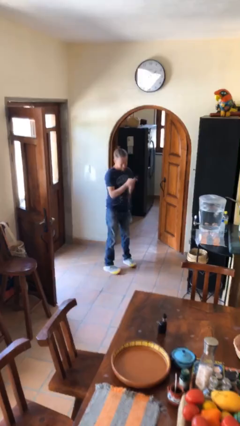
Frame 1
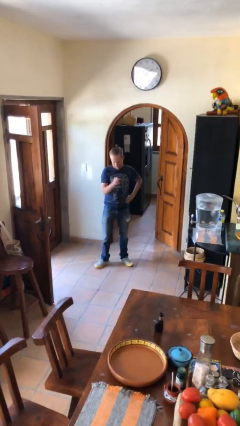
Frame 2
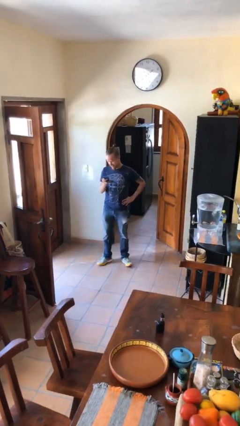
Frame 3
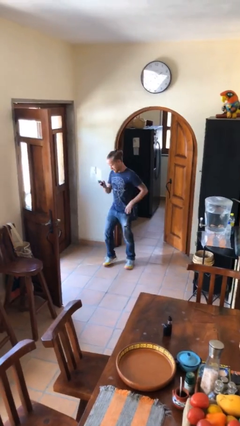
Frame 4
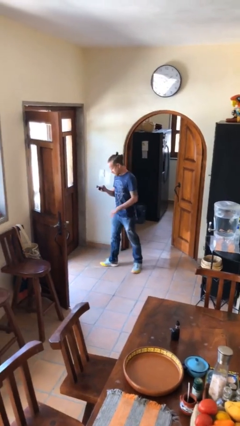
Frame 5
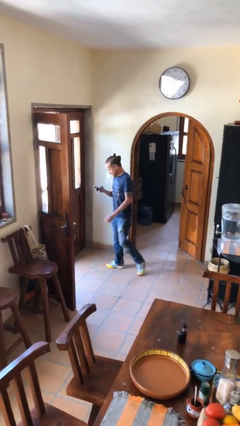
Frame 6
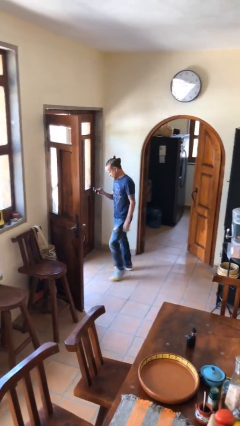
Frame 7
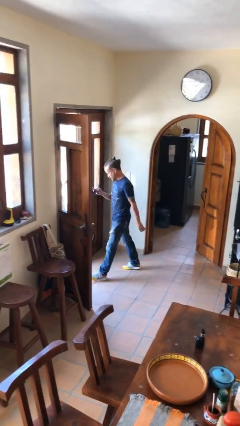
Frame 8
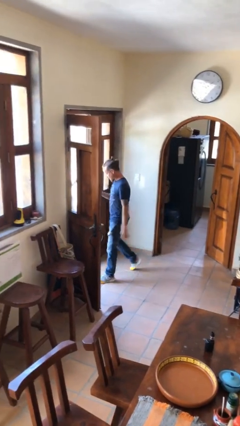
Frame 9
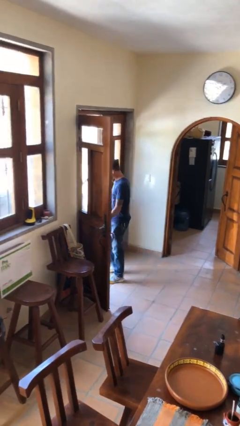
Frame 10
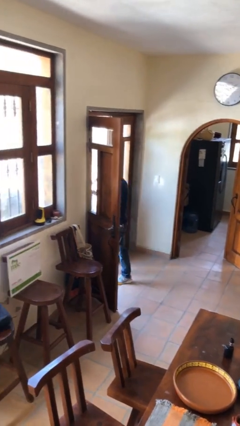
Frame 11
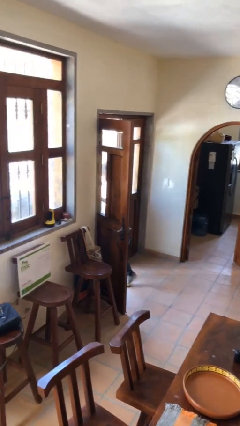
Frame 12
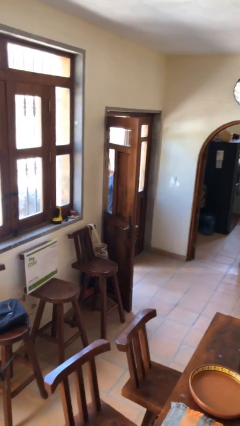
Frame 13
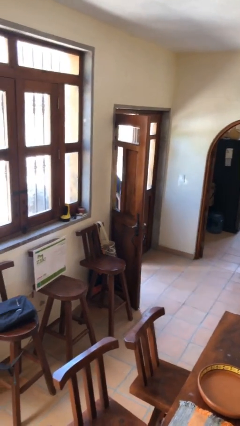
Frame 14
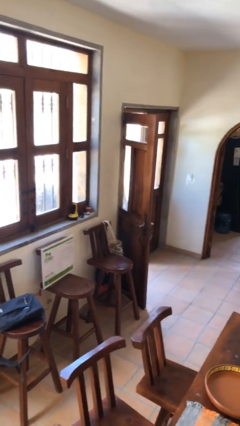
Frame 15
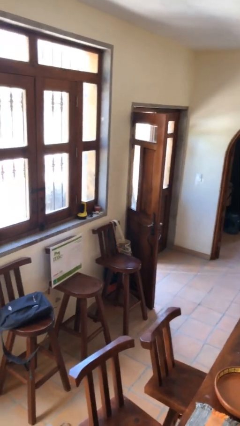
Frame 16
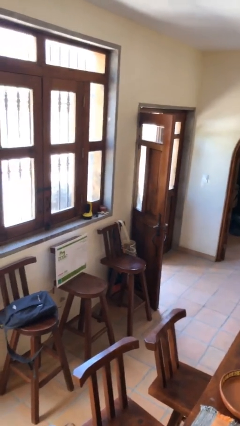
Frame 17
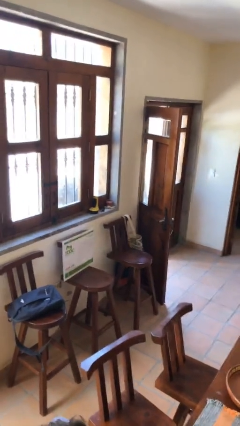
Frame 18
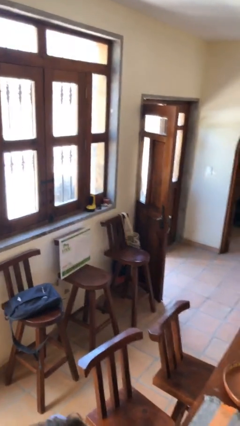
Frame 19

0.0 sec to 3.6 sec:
person exits scene through structure

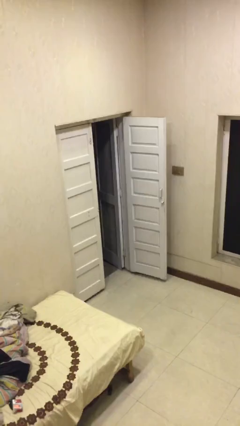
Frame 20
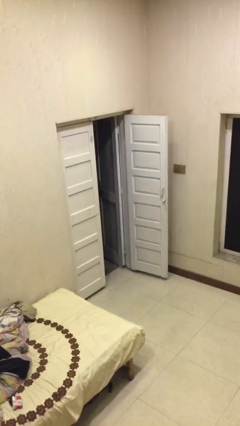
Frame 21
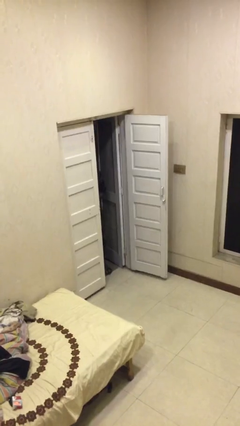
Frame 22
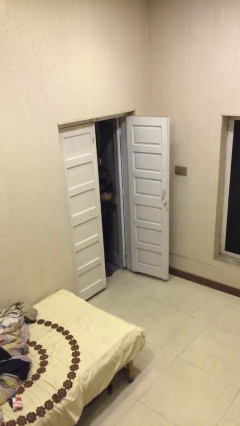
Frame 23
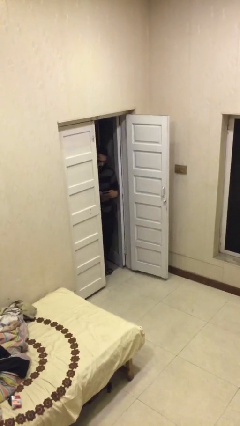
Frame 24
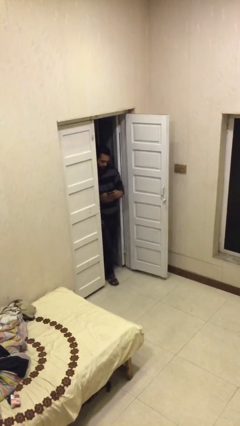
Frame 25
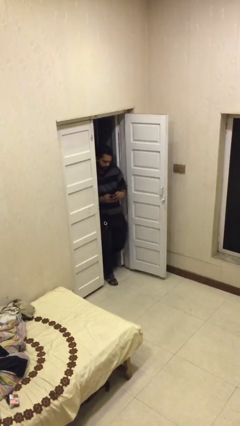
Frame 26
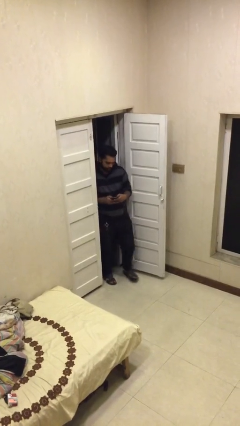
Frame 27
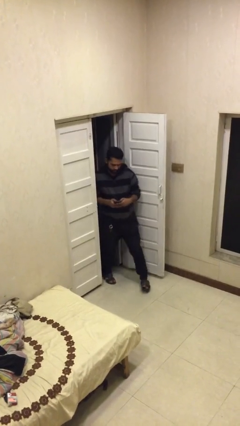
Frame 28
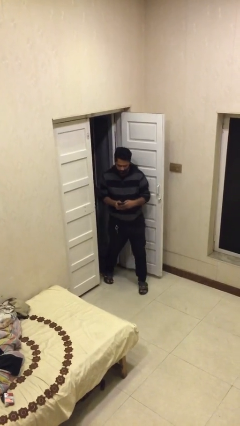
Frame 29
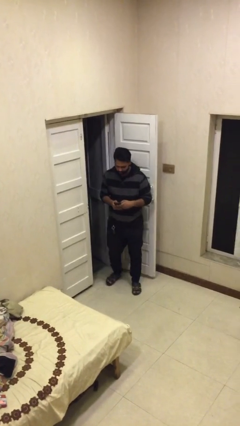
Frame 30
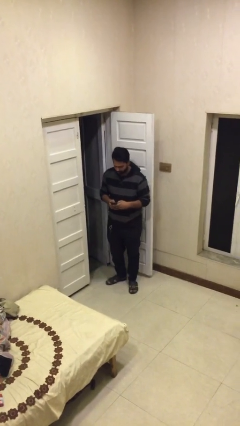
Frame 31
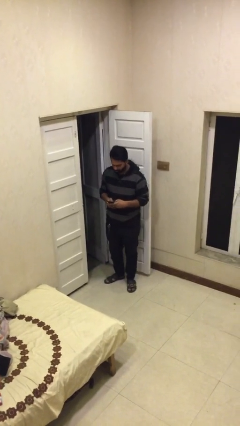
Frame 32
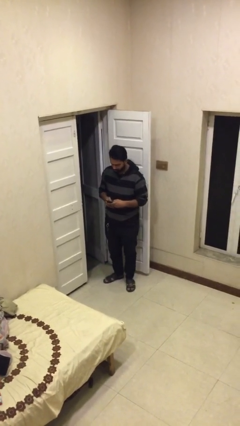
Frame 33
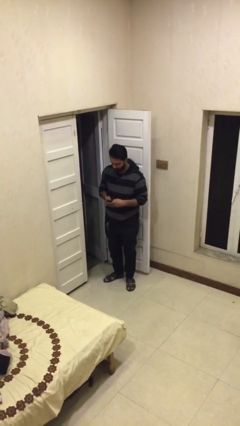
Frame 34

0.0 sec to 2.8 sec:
person enters scene through structure

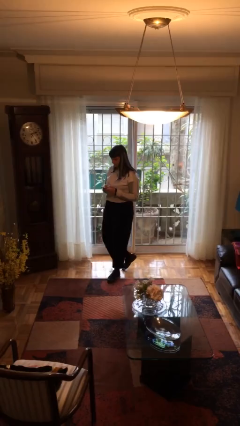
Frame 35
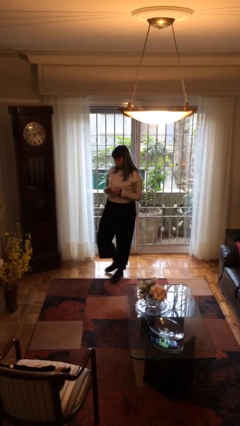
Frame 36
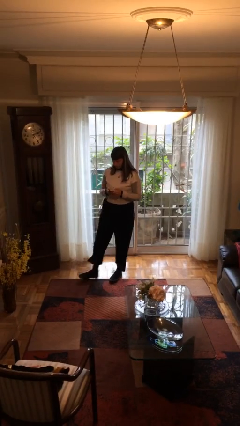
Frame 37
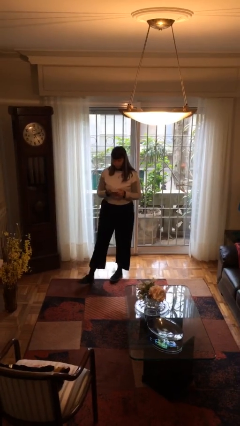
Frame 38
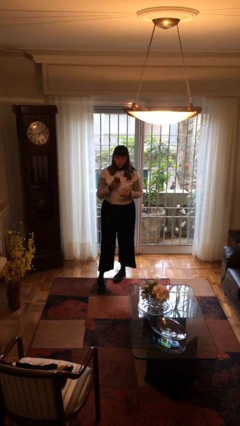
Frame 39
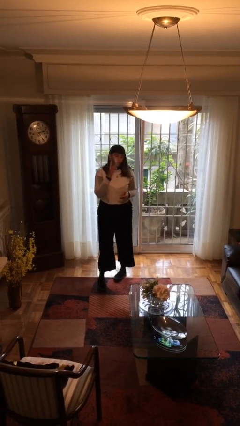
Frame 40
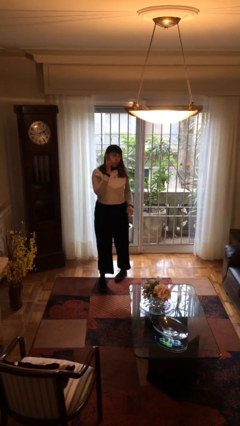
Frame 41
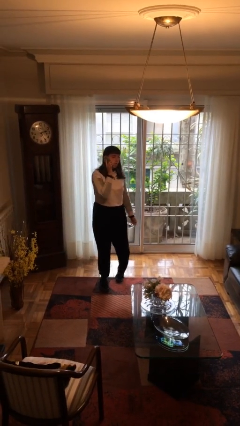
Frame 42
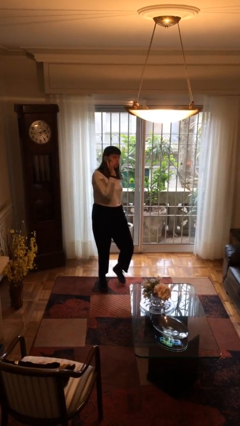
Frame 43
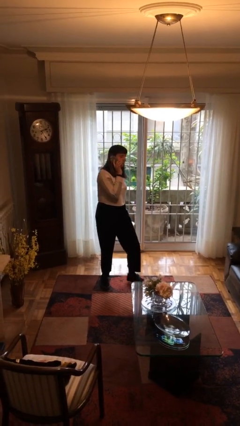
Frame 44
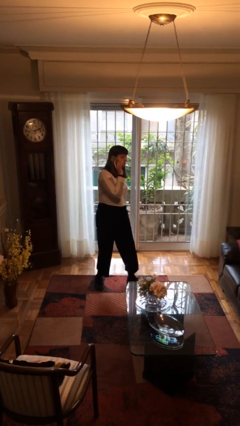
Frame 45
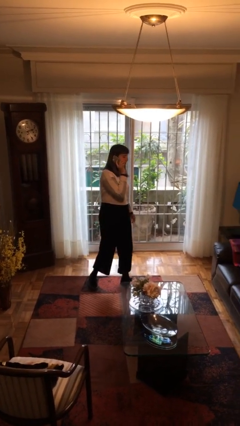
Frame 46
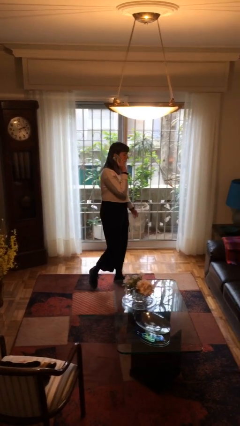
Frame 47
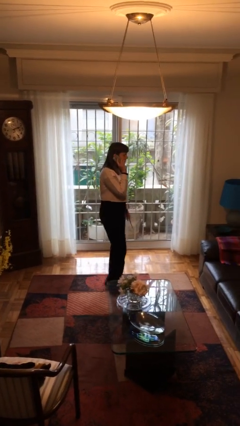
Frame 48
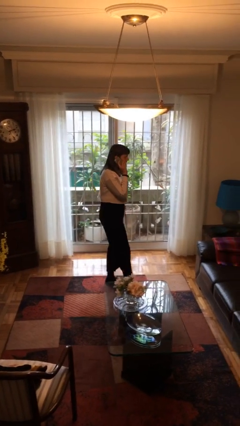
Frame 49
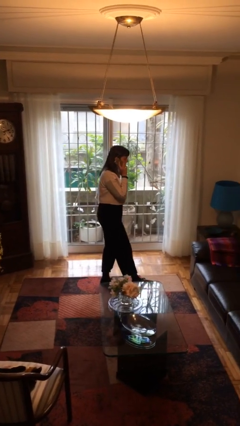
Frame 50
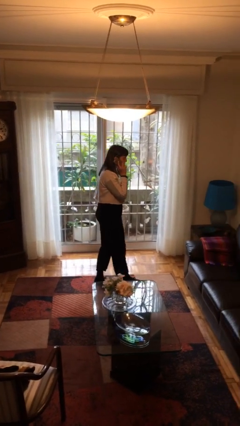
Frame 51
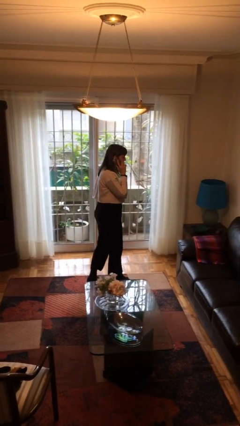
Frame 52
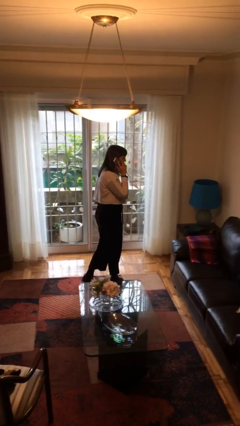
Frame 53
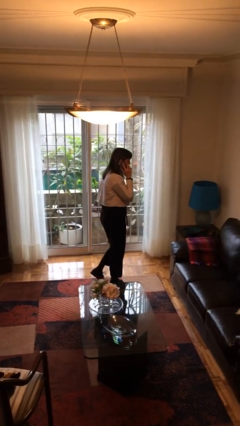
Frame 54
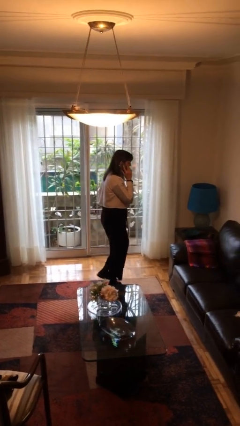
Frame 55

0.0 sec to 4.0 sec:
person talks on phone

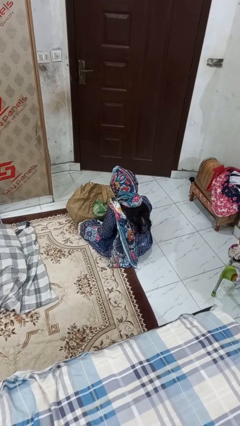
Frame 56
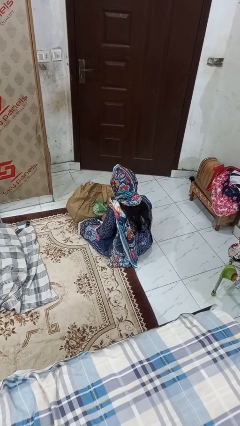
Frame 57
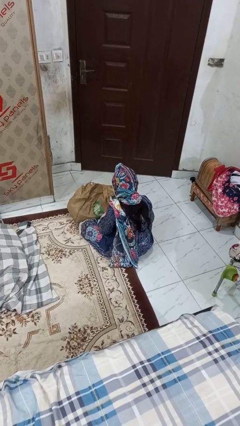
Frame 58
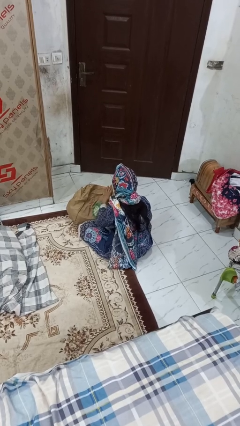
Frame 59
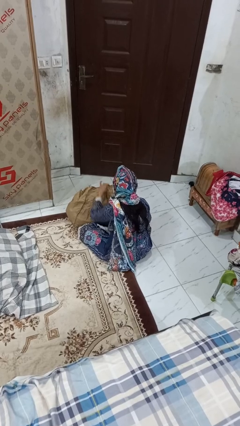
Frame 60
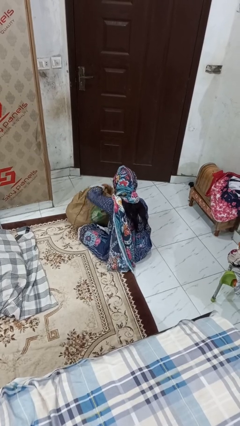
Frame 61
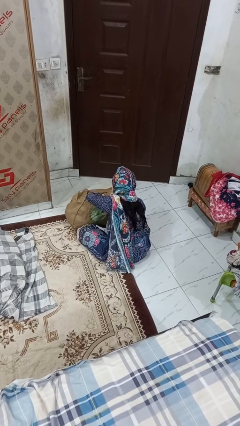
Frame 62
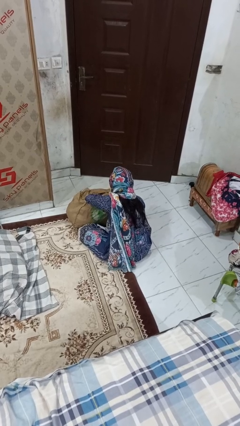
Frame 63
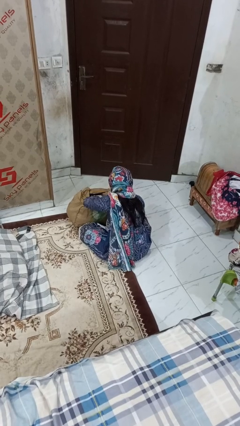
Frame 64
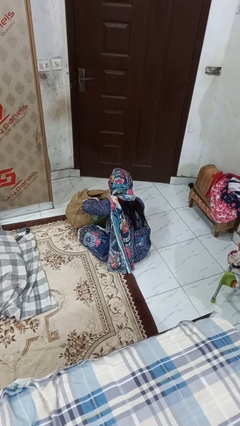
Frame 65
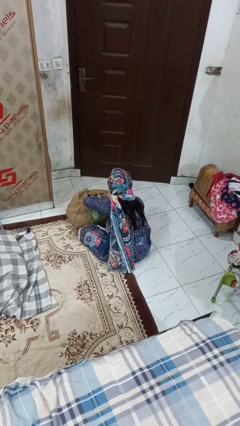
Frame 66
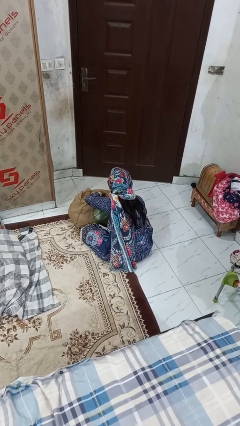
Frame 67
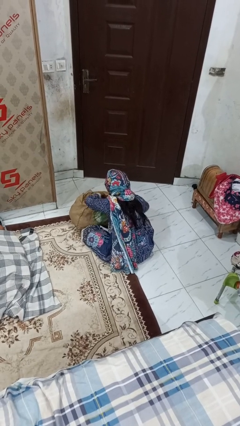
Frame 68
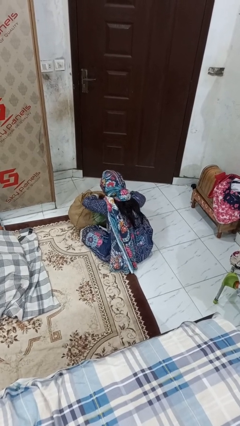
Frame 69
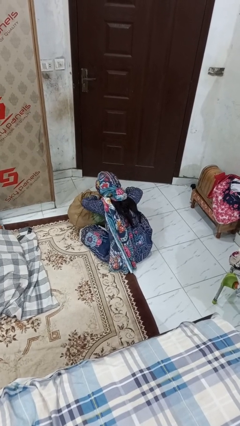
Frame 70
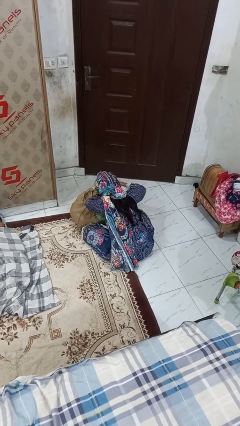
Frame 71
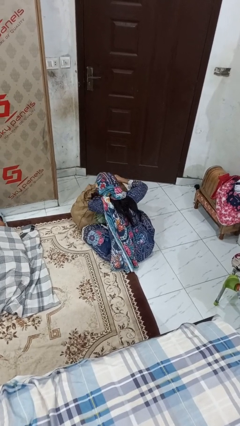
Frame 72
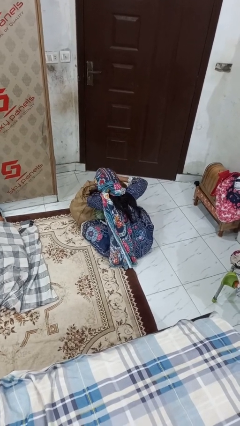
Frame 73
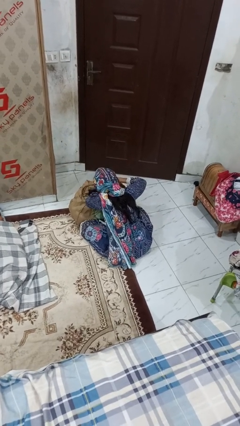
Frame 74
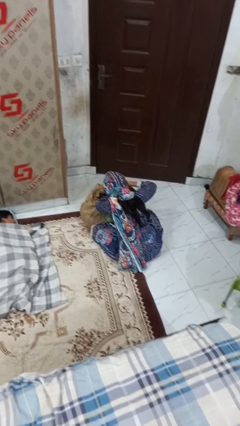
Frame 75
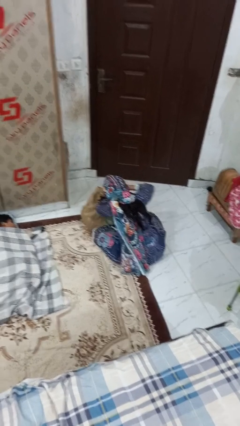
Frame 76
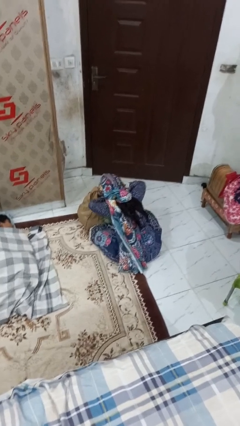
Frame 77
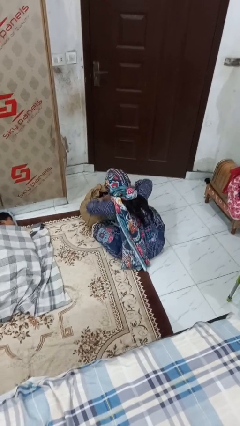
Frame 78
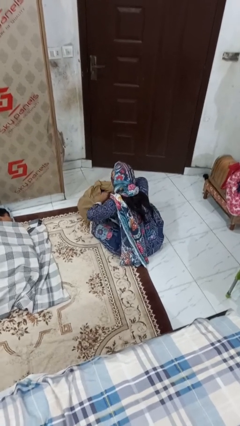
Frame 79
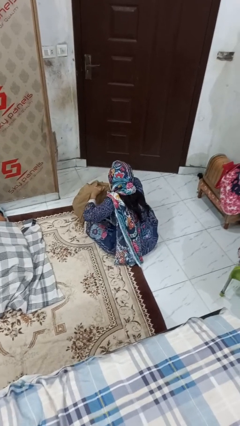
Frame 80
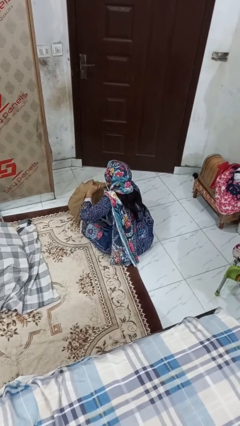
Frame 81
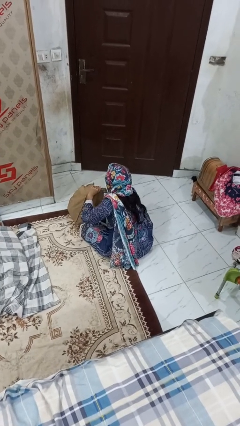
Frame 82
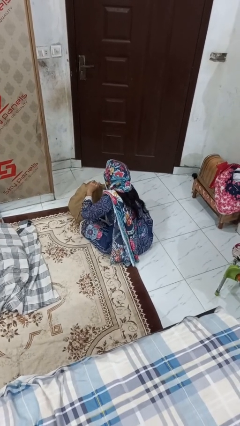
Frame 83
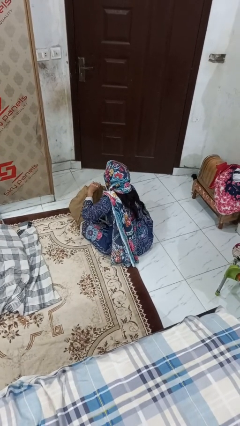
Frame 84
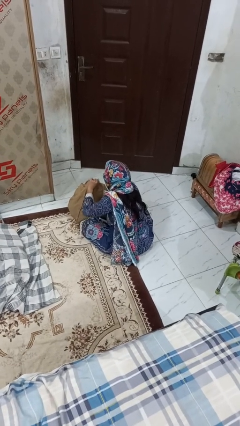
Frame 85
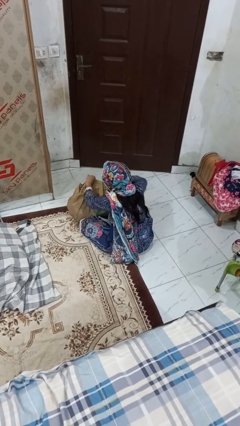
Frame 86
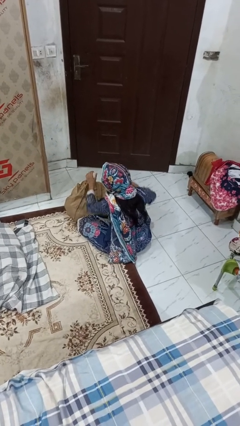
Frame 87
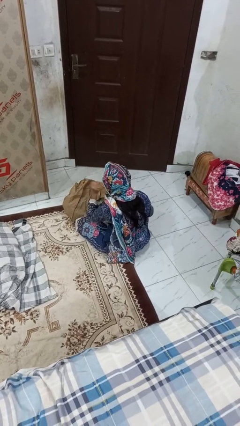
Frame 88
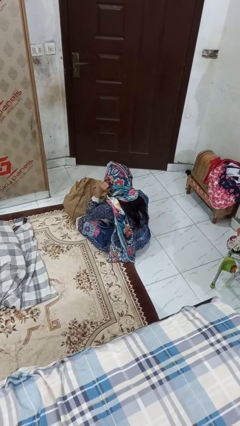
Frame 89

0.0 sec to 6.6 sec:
person searches in bag

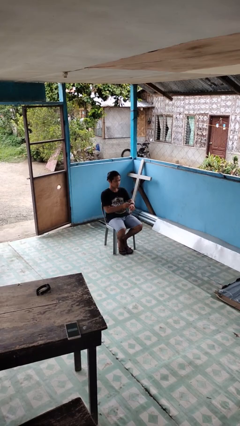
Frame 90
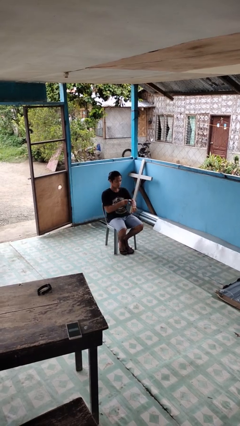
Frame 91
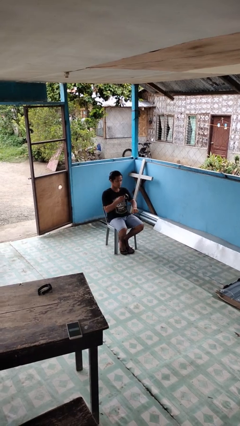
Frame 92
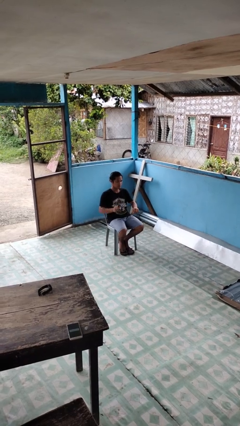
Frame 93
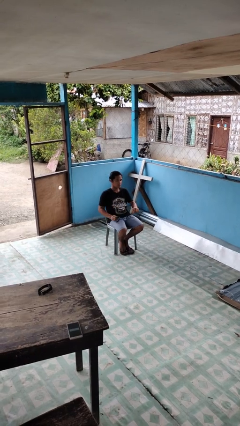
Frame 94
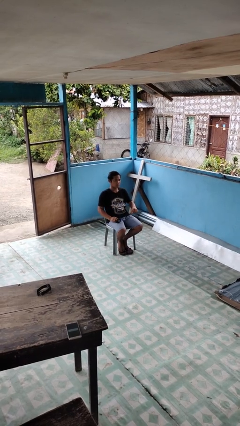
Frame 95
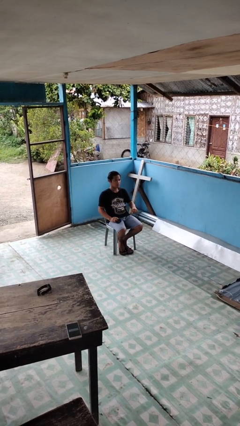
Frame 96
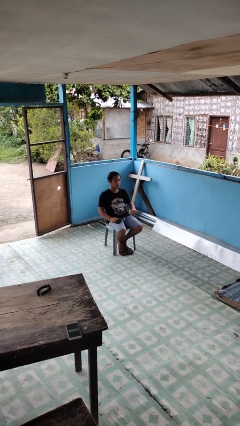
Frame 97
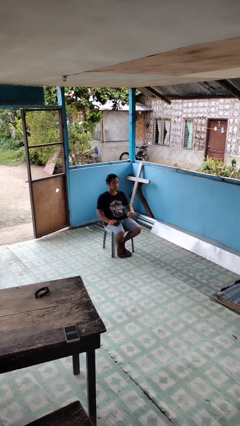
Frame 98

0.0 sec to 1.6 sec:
person takes off wristwatch
